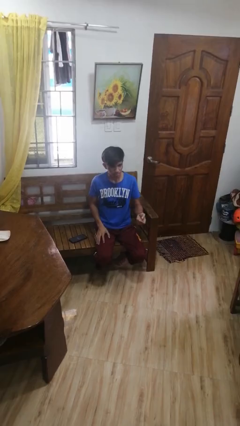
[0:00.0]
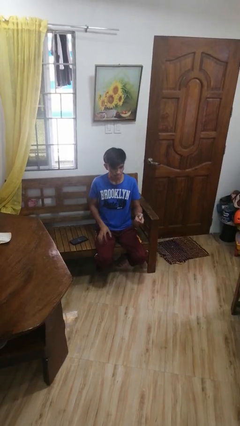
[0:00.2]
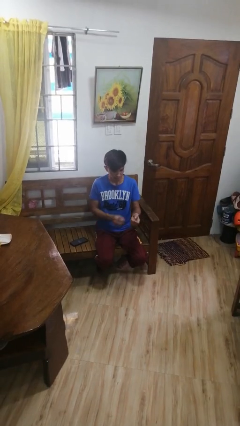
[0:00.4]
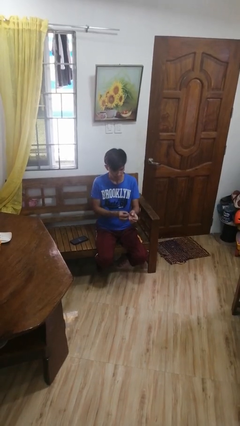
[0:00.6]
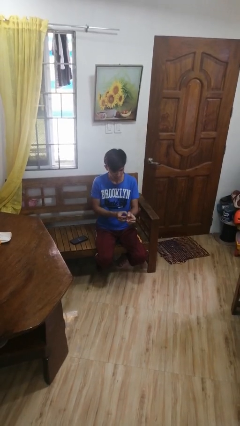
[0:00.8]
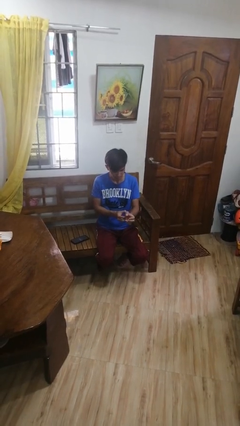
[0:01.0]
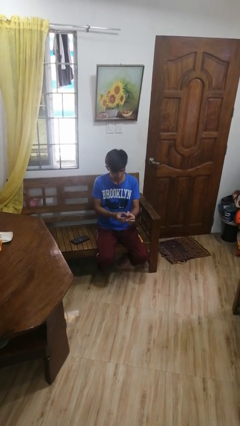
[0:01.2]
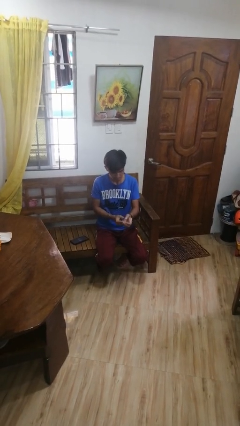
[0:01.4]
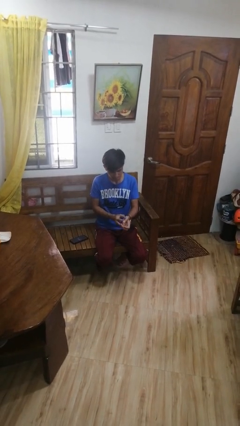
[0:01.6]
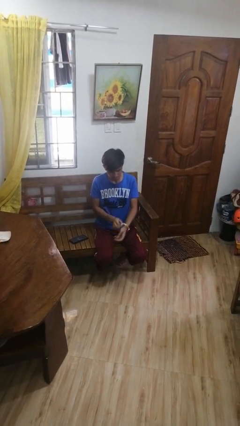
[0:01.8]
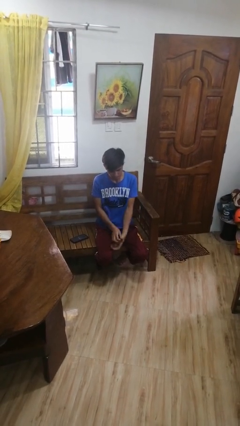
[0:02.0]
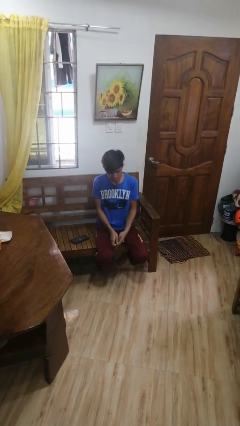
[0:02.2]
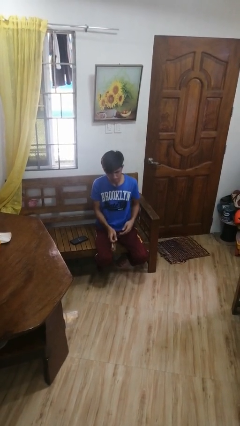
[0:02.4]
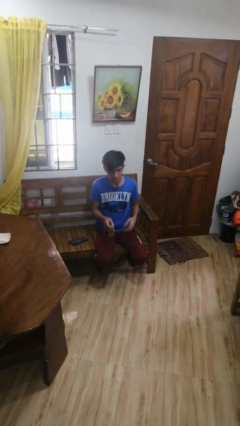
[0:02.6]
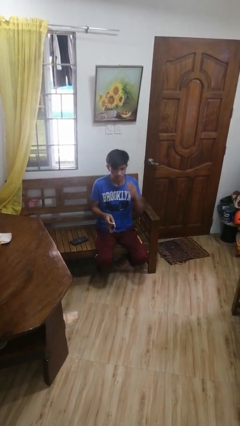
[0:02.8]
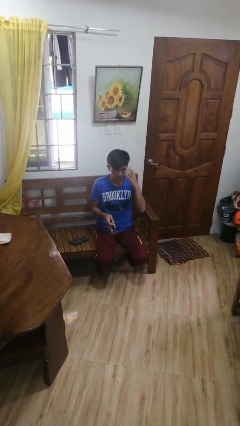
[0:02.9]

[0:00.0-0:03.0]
person takes off wristwatch

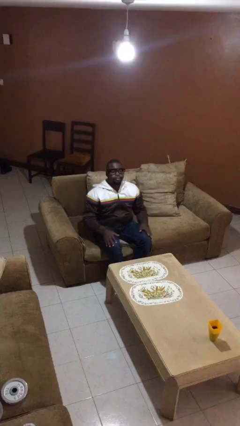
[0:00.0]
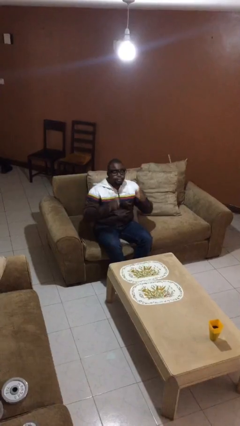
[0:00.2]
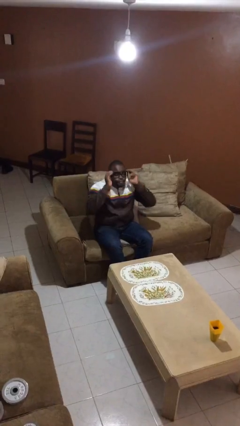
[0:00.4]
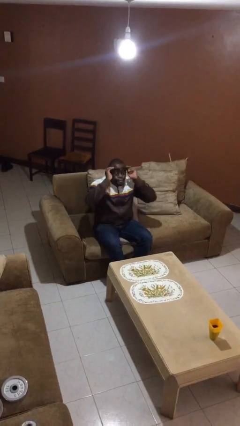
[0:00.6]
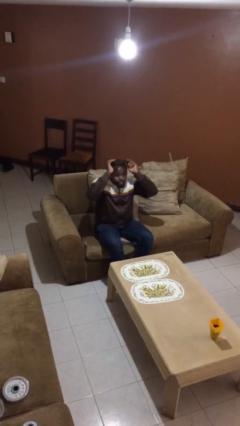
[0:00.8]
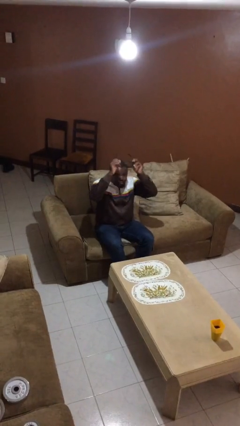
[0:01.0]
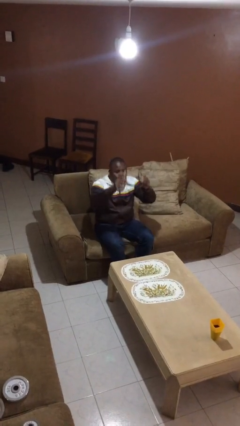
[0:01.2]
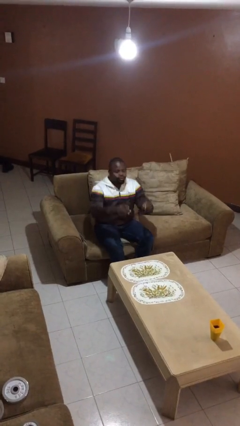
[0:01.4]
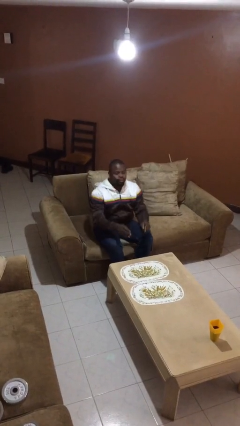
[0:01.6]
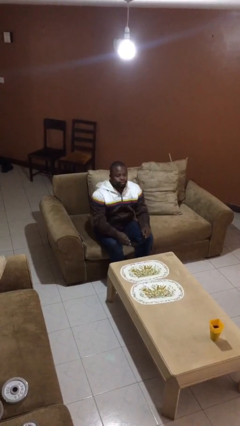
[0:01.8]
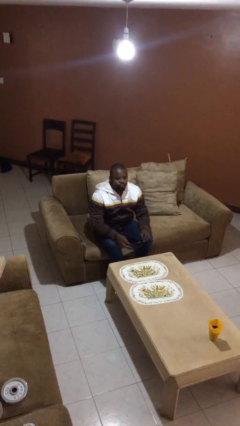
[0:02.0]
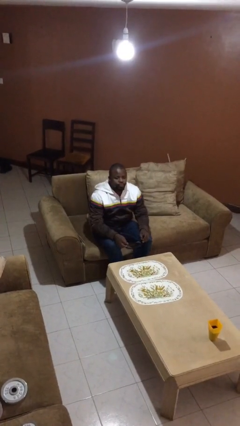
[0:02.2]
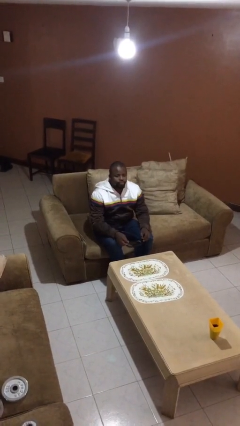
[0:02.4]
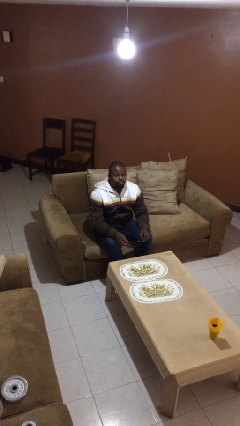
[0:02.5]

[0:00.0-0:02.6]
person takes off glasses

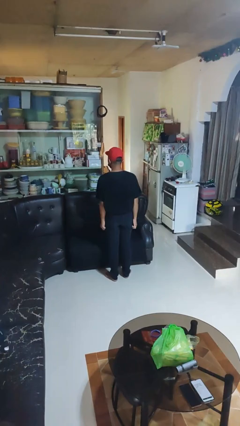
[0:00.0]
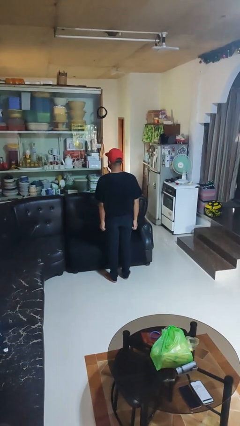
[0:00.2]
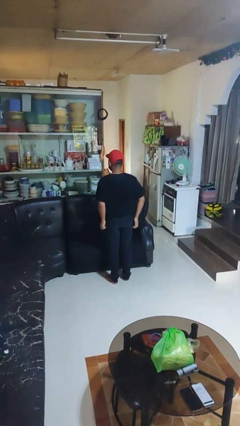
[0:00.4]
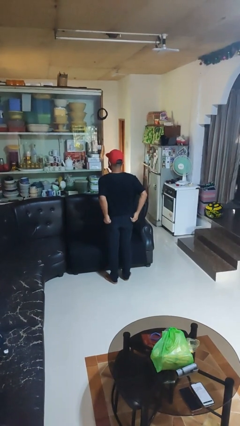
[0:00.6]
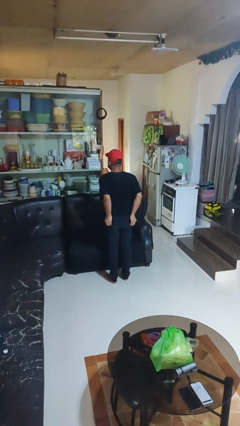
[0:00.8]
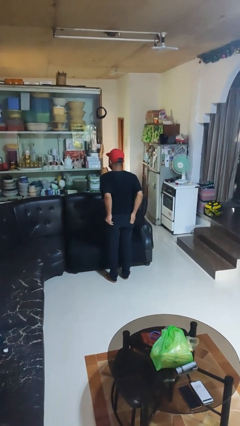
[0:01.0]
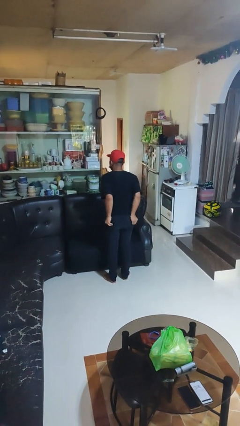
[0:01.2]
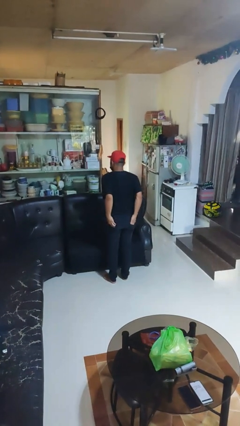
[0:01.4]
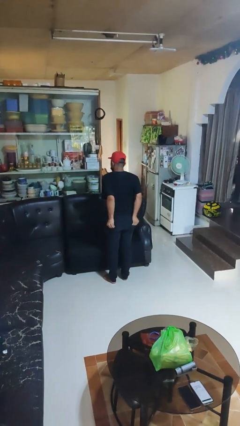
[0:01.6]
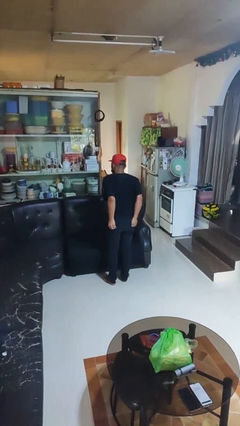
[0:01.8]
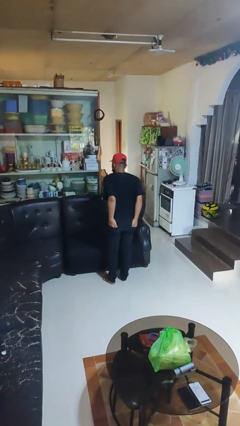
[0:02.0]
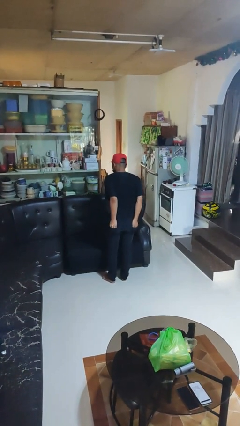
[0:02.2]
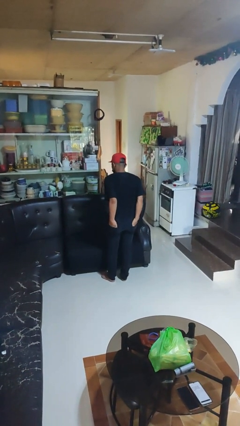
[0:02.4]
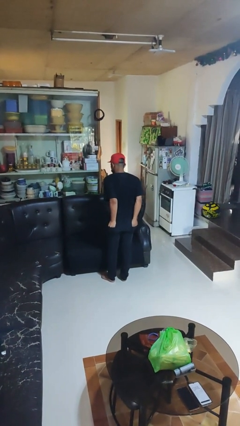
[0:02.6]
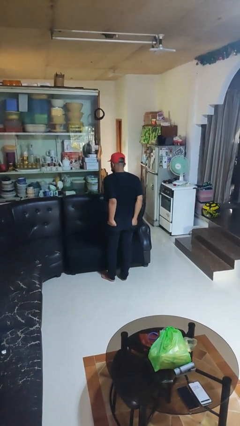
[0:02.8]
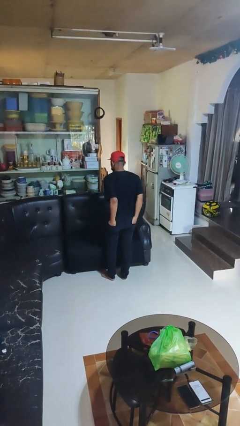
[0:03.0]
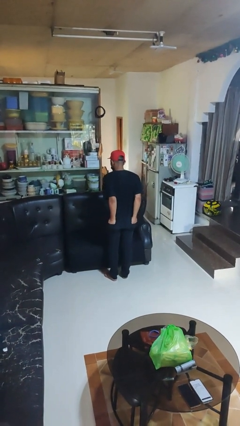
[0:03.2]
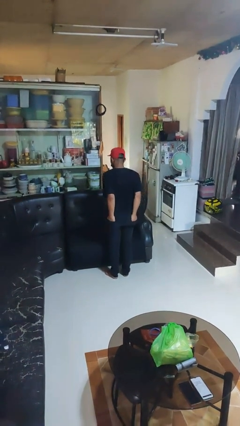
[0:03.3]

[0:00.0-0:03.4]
person puts hands in back pockets

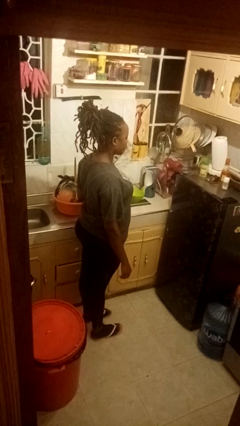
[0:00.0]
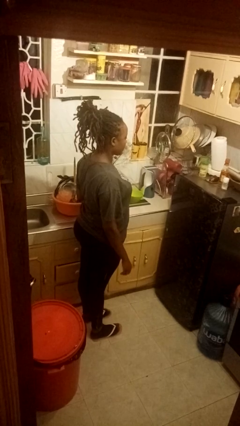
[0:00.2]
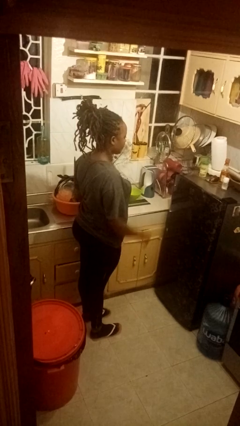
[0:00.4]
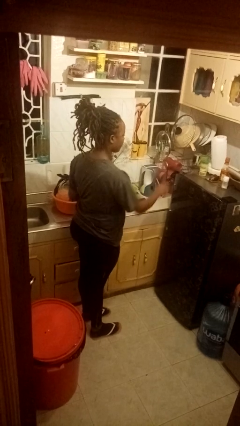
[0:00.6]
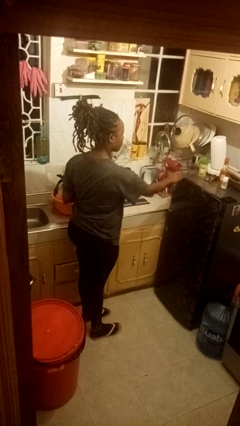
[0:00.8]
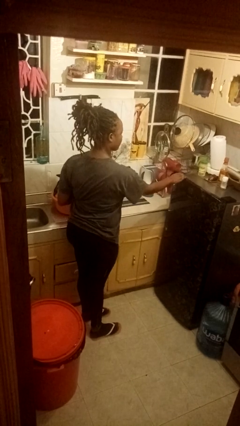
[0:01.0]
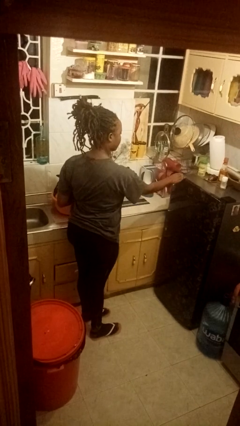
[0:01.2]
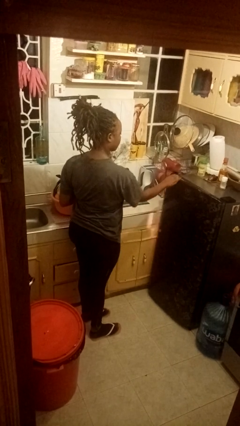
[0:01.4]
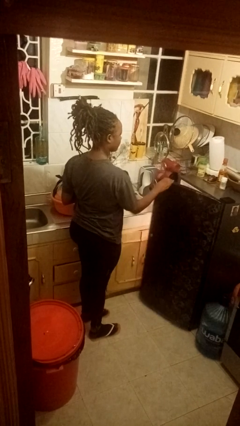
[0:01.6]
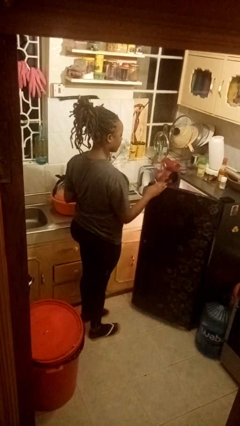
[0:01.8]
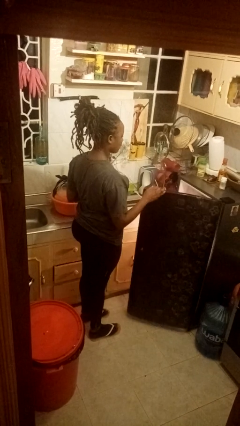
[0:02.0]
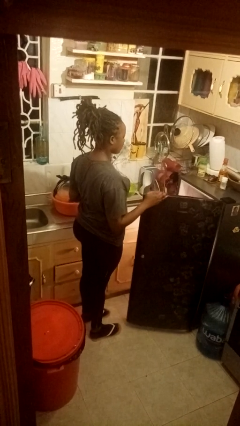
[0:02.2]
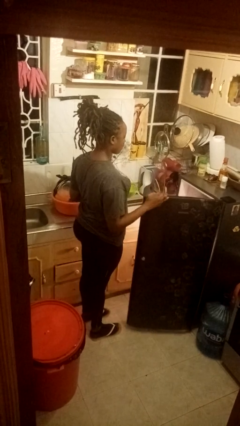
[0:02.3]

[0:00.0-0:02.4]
person opens refrigerator

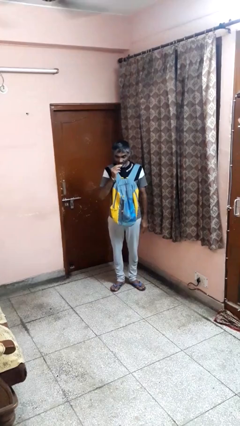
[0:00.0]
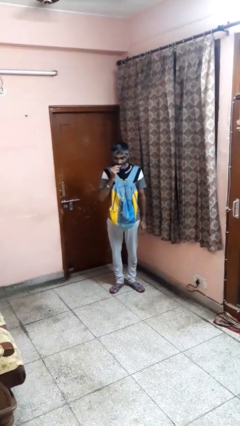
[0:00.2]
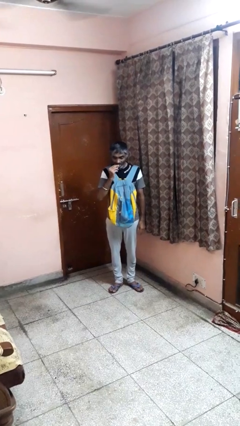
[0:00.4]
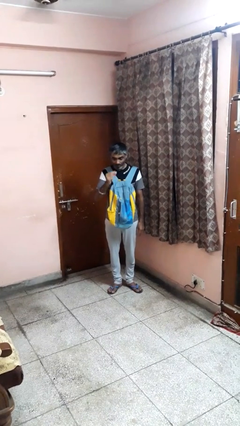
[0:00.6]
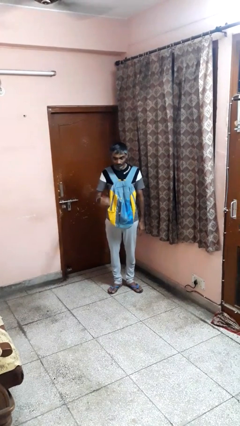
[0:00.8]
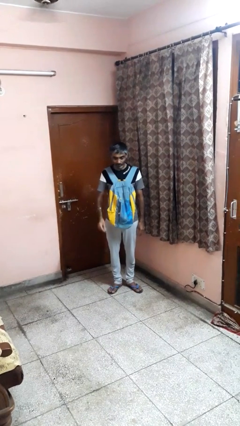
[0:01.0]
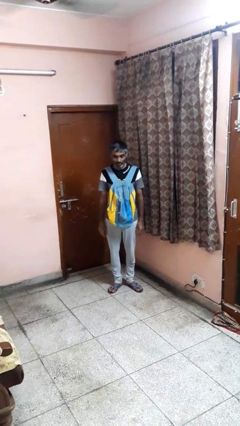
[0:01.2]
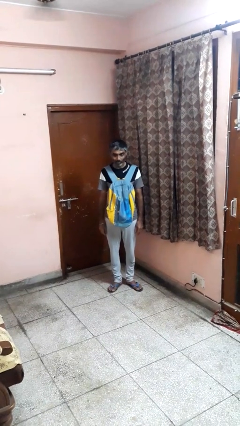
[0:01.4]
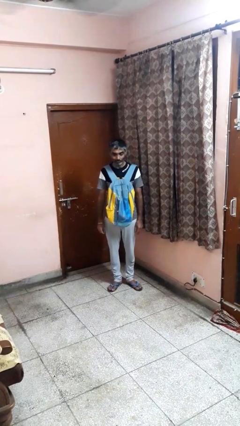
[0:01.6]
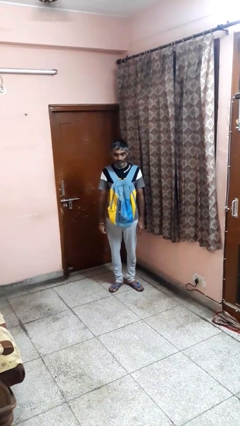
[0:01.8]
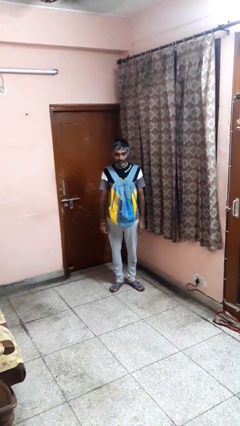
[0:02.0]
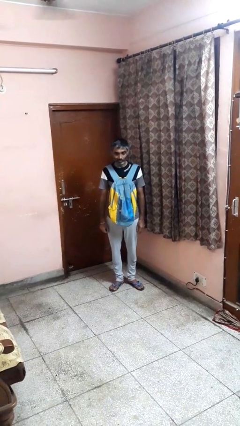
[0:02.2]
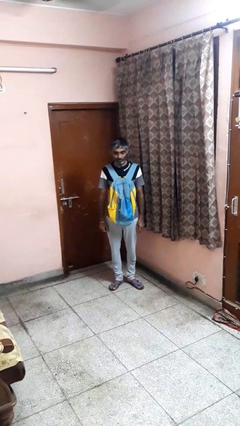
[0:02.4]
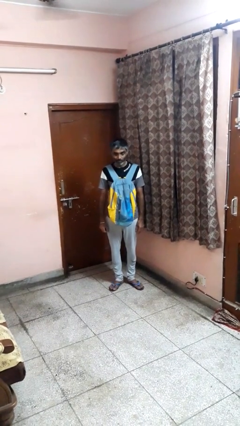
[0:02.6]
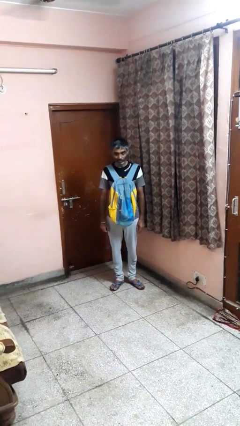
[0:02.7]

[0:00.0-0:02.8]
person eats snack from bag

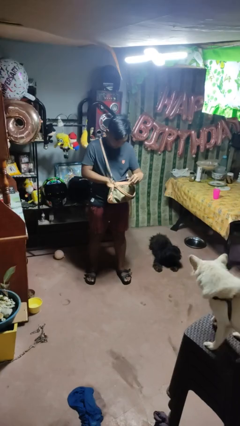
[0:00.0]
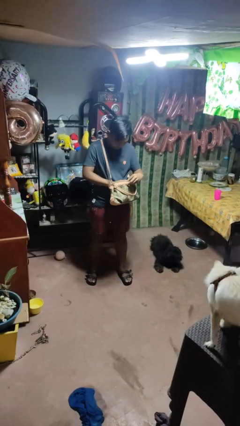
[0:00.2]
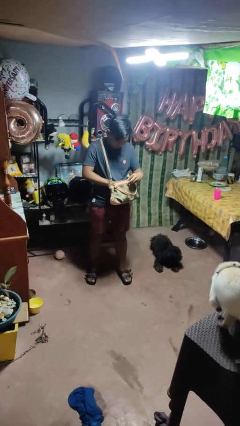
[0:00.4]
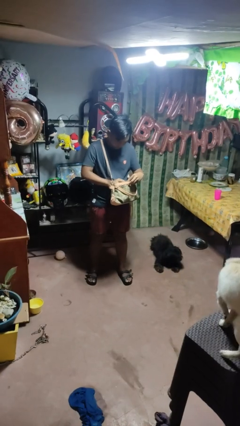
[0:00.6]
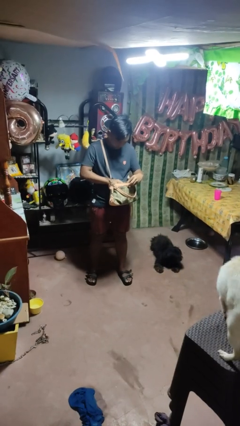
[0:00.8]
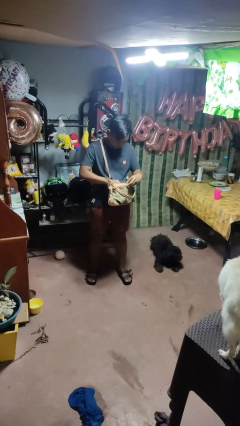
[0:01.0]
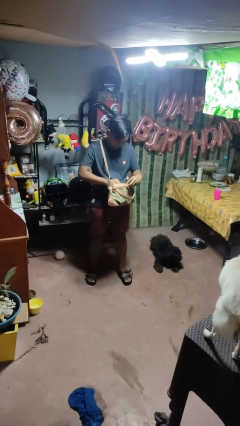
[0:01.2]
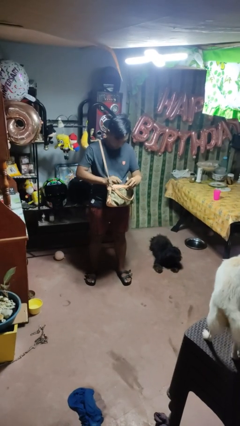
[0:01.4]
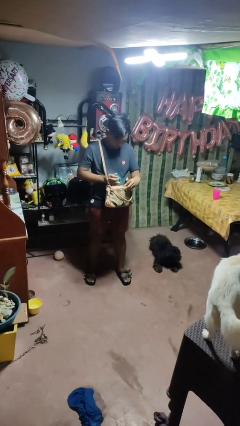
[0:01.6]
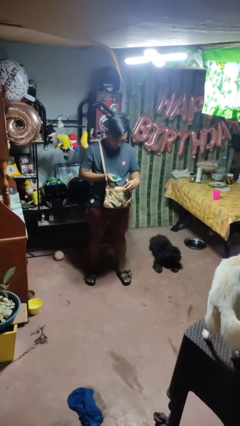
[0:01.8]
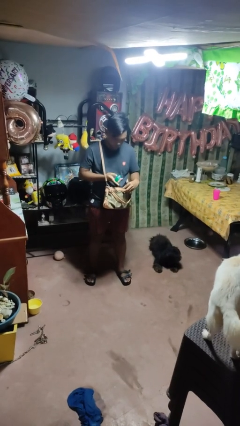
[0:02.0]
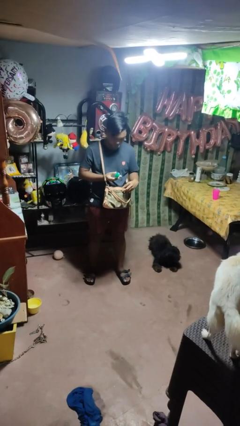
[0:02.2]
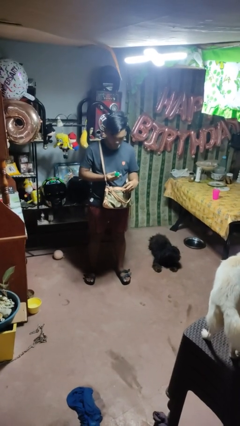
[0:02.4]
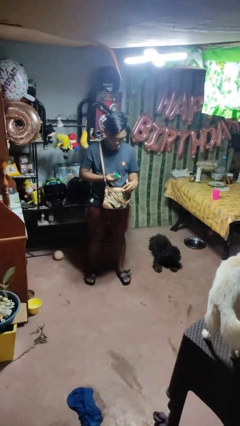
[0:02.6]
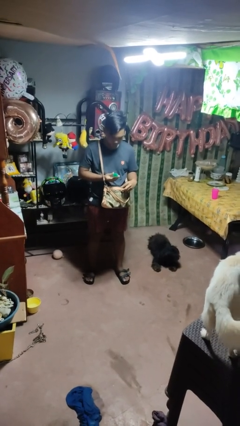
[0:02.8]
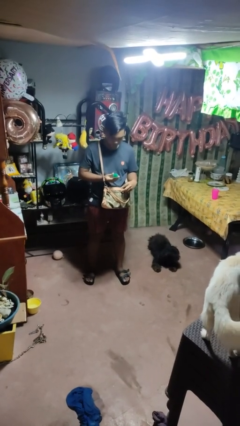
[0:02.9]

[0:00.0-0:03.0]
person takes object from purse
